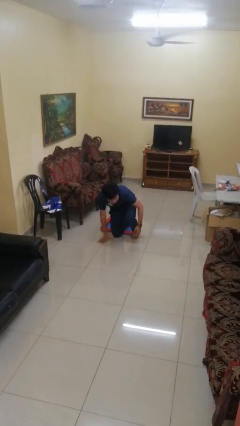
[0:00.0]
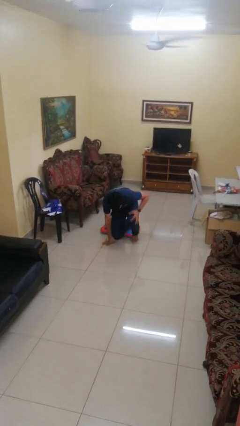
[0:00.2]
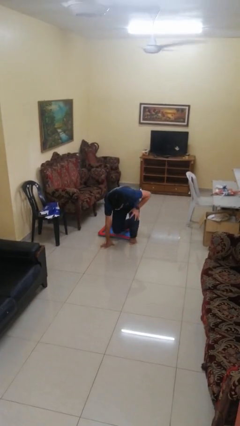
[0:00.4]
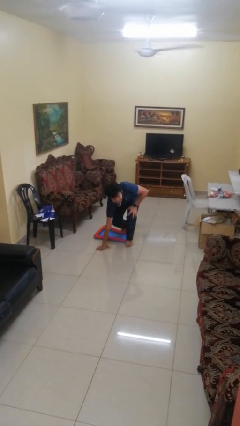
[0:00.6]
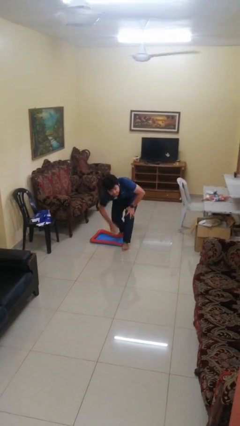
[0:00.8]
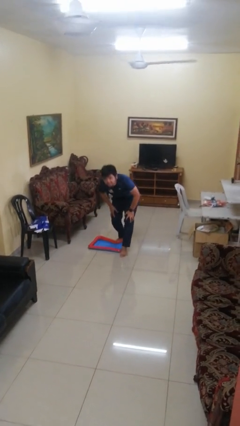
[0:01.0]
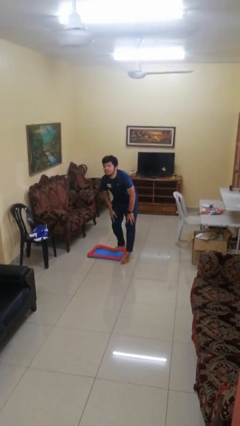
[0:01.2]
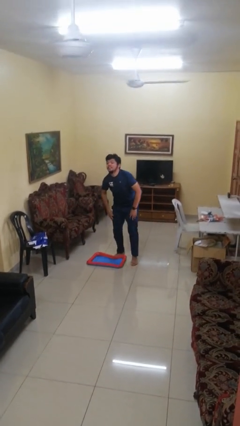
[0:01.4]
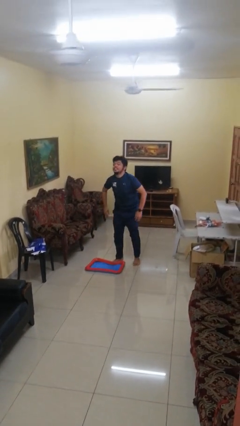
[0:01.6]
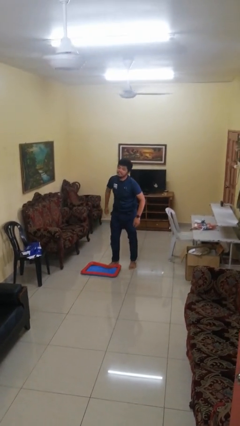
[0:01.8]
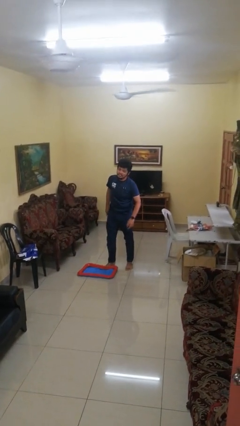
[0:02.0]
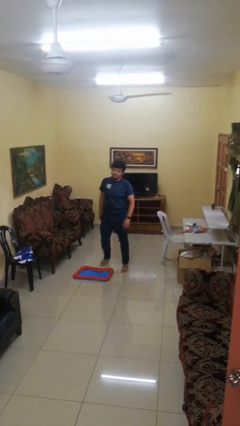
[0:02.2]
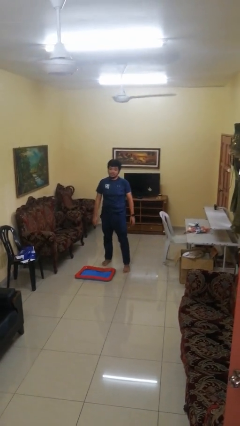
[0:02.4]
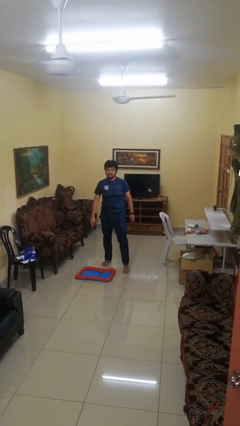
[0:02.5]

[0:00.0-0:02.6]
person stands up from floor

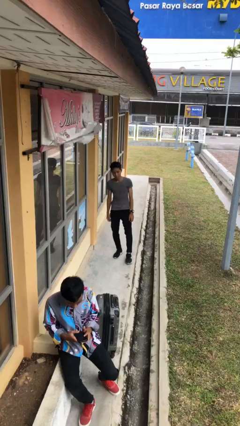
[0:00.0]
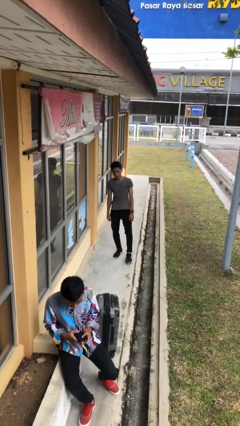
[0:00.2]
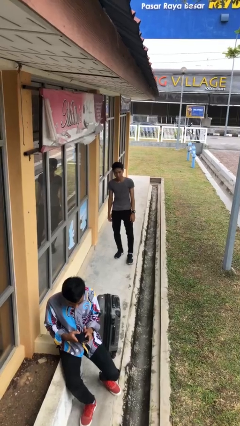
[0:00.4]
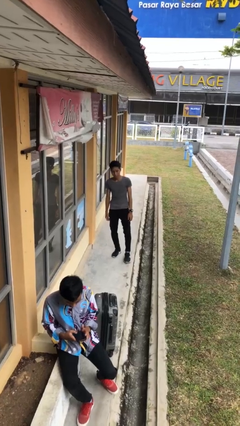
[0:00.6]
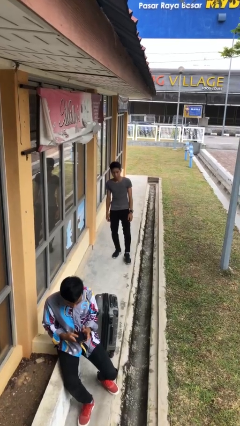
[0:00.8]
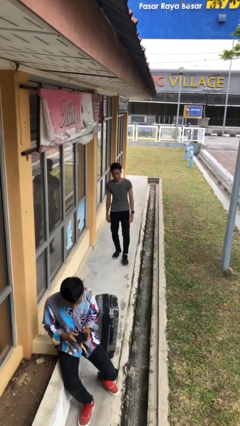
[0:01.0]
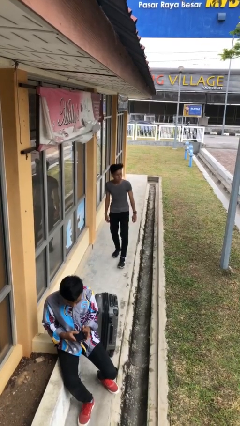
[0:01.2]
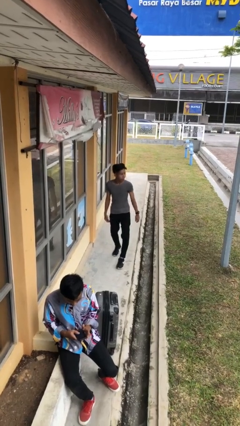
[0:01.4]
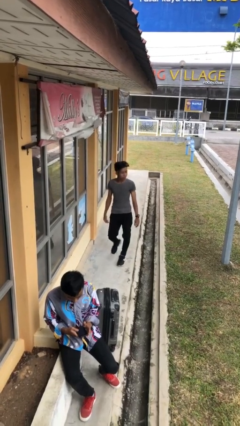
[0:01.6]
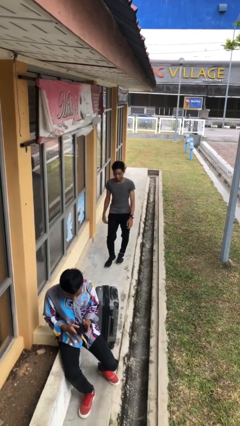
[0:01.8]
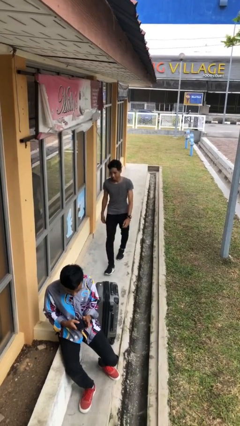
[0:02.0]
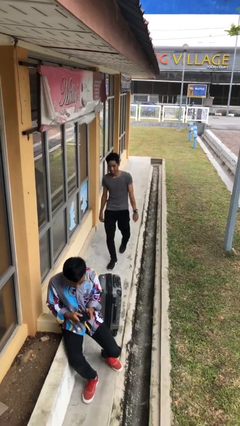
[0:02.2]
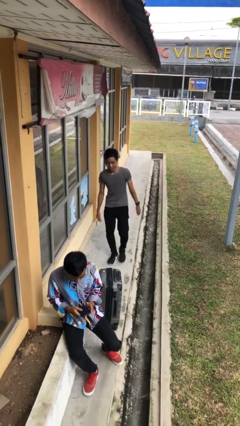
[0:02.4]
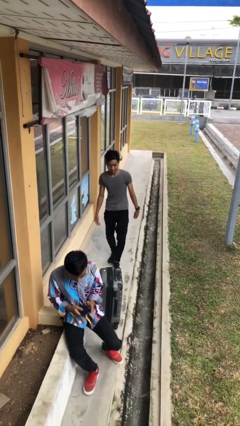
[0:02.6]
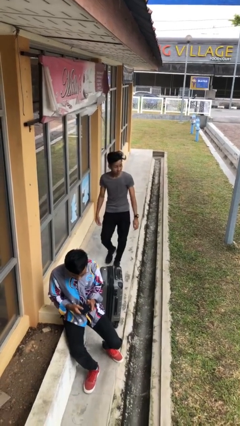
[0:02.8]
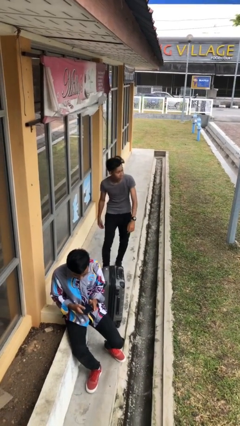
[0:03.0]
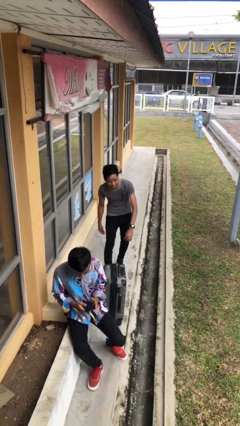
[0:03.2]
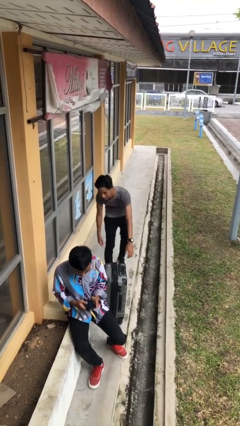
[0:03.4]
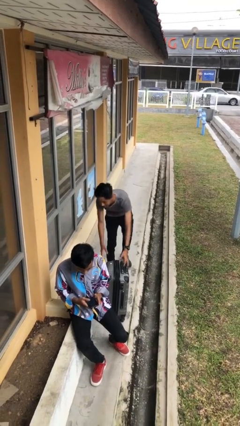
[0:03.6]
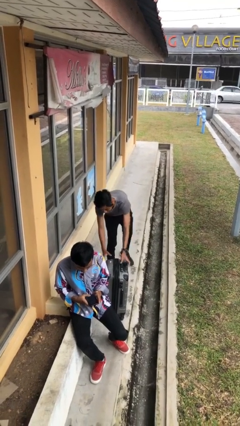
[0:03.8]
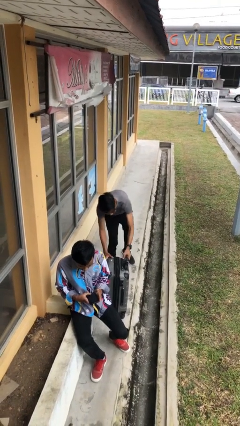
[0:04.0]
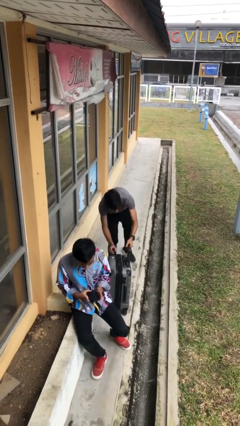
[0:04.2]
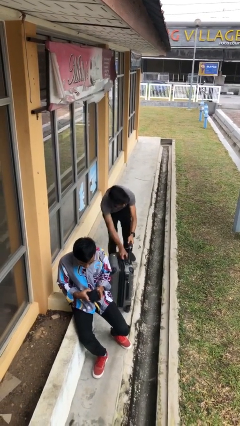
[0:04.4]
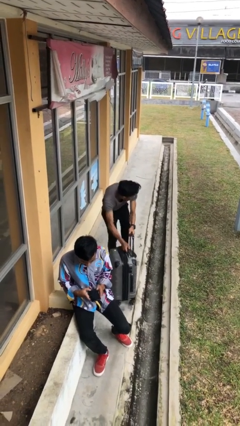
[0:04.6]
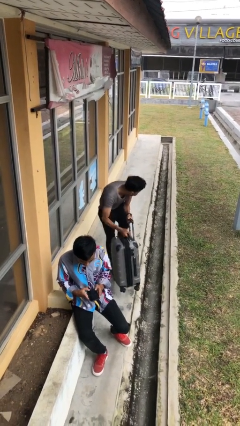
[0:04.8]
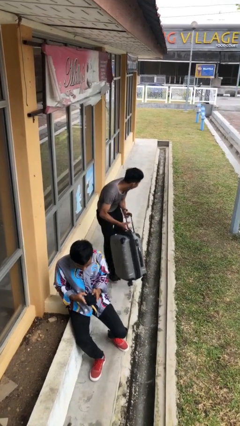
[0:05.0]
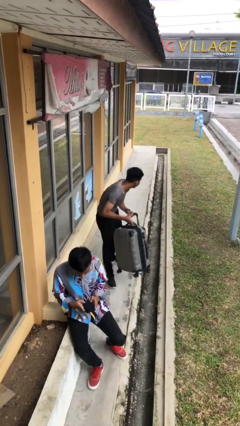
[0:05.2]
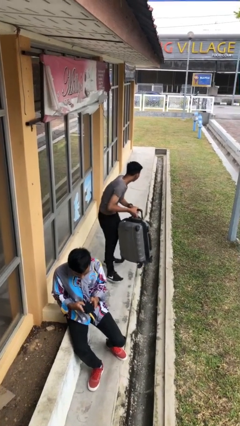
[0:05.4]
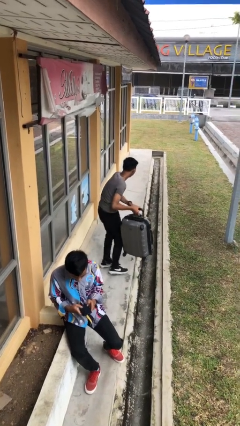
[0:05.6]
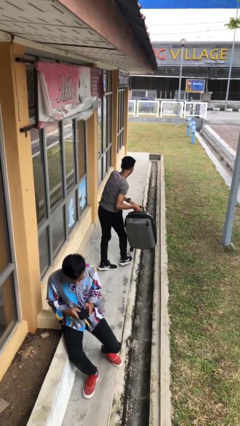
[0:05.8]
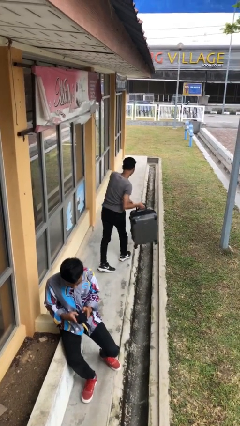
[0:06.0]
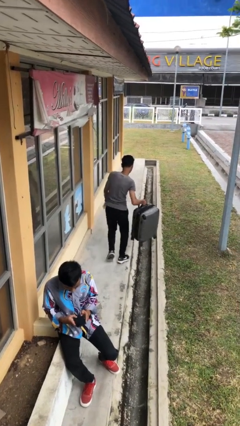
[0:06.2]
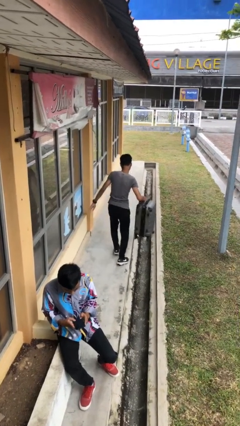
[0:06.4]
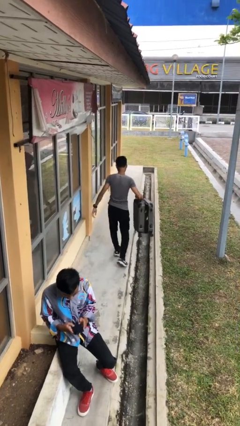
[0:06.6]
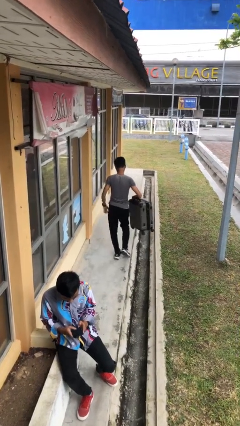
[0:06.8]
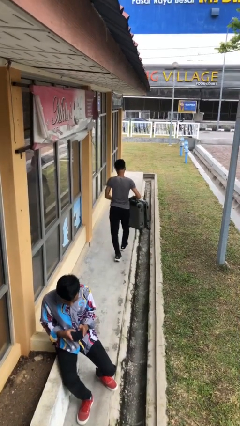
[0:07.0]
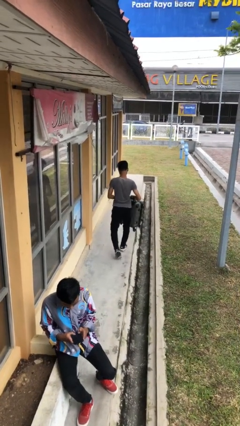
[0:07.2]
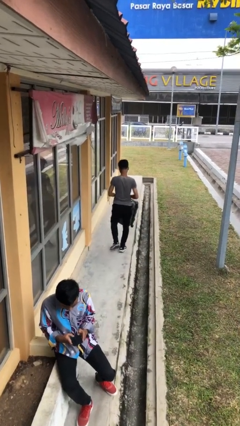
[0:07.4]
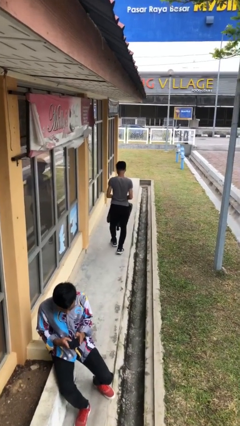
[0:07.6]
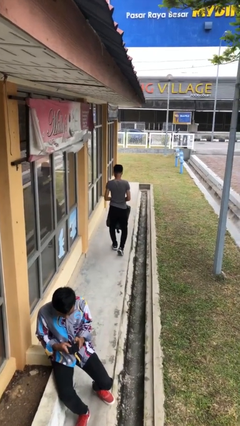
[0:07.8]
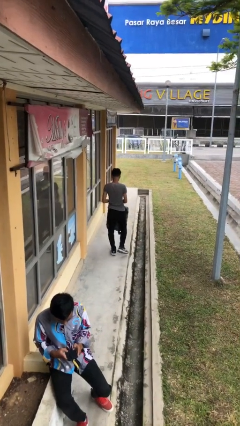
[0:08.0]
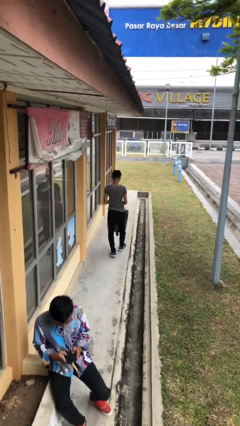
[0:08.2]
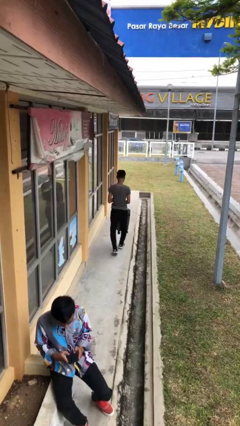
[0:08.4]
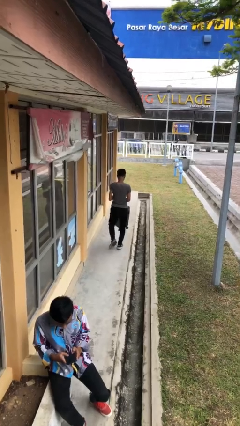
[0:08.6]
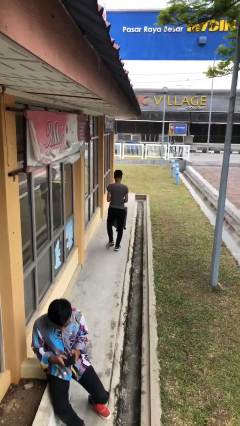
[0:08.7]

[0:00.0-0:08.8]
person steals object from person

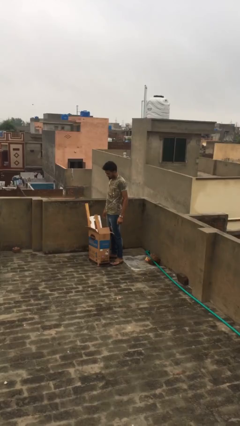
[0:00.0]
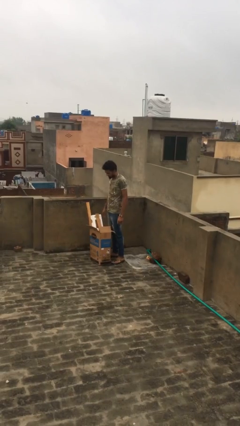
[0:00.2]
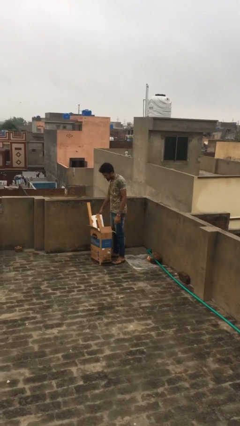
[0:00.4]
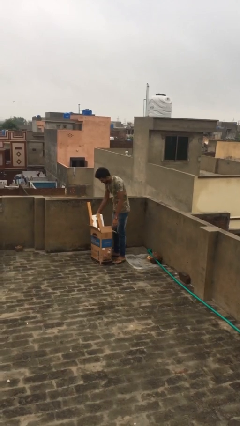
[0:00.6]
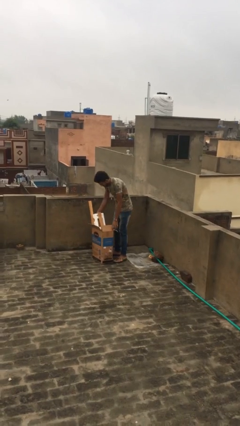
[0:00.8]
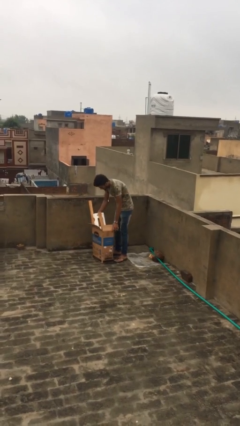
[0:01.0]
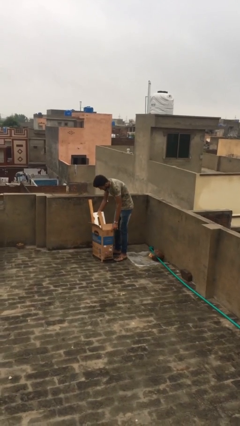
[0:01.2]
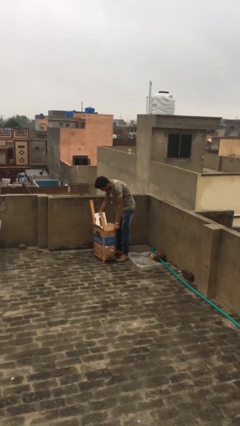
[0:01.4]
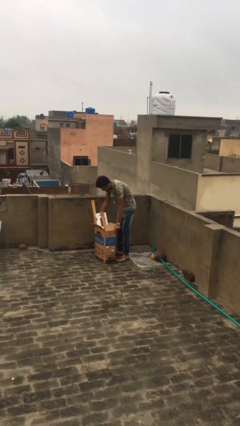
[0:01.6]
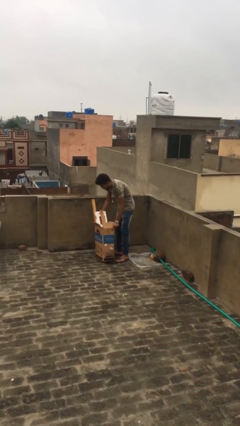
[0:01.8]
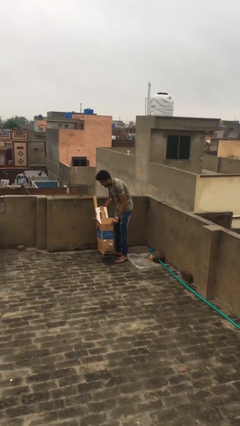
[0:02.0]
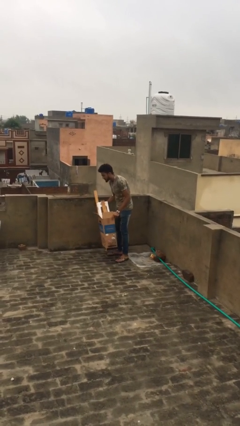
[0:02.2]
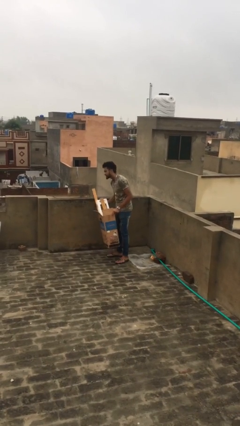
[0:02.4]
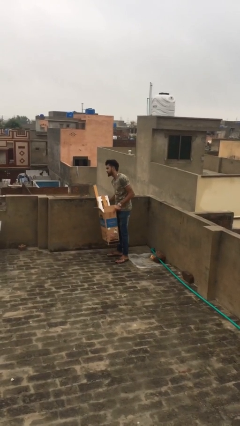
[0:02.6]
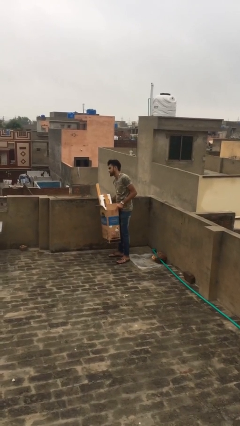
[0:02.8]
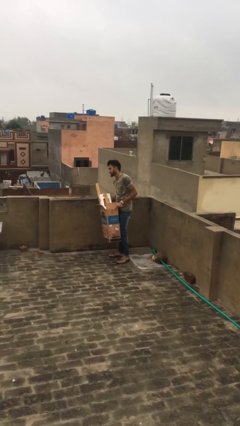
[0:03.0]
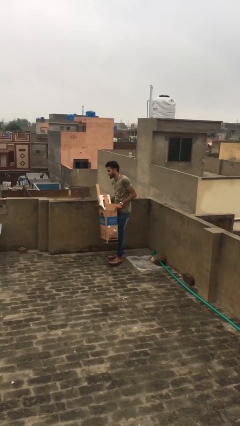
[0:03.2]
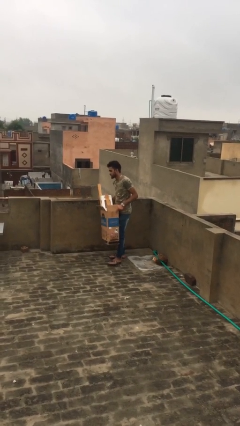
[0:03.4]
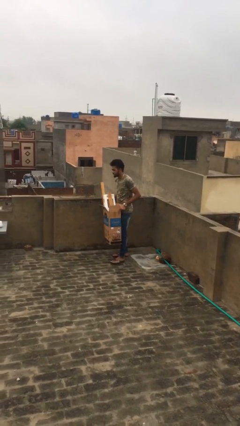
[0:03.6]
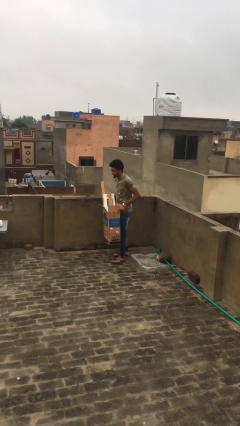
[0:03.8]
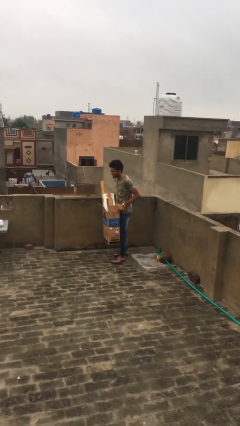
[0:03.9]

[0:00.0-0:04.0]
person picks up object from floor

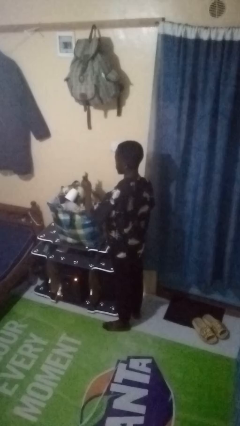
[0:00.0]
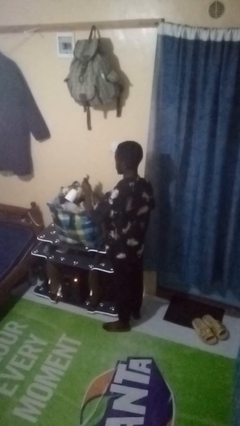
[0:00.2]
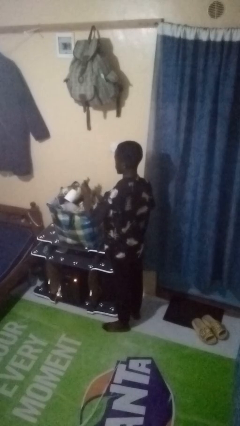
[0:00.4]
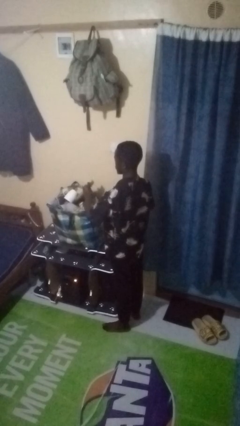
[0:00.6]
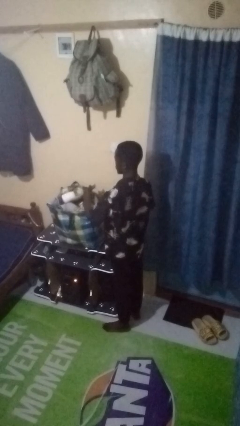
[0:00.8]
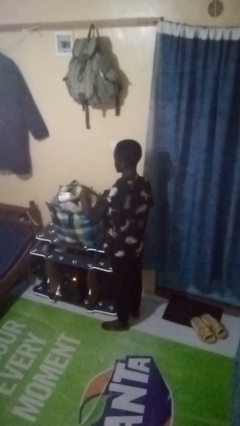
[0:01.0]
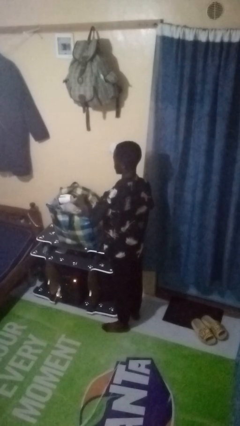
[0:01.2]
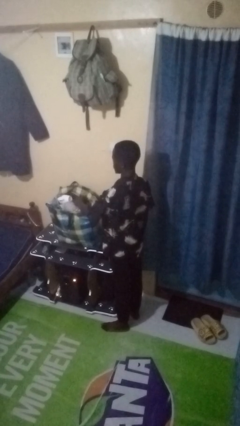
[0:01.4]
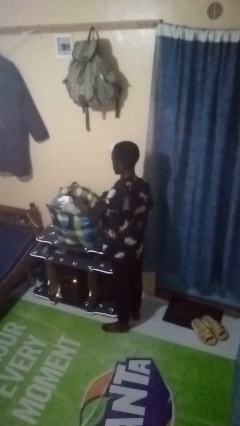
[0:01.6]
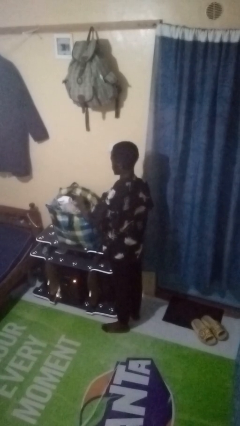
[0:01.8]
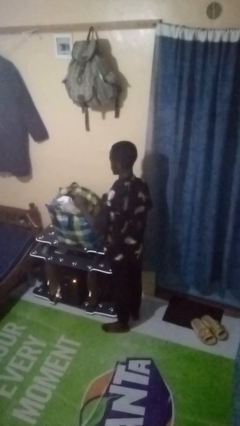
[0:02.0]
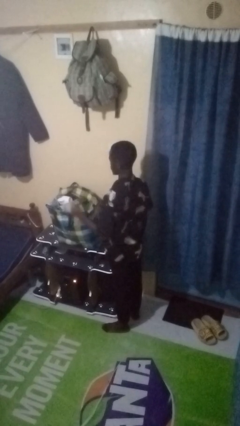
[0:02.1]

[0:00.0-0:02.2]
person puts object into bag
